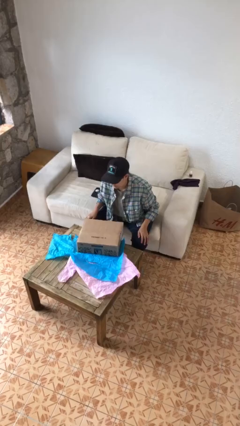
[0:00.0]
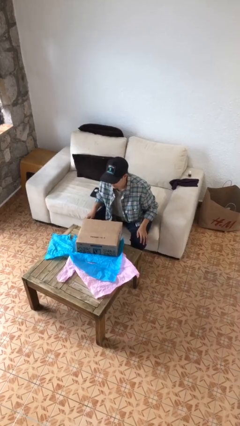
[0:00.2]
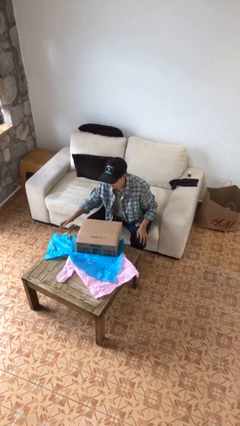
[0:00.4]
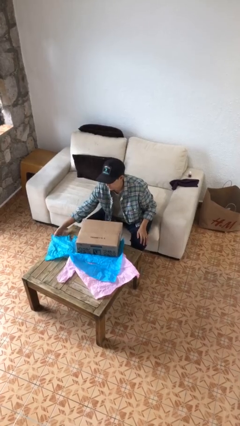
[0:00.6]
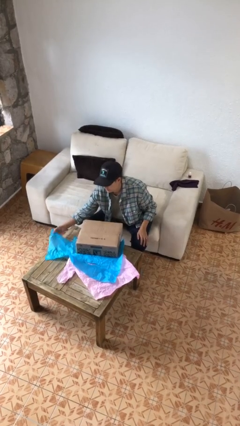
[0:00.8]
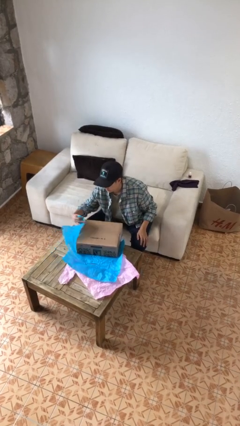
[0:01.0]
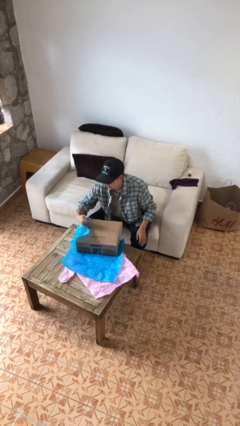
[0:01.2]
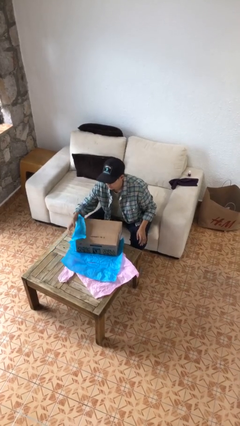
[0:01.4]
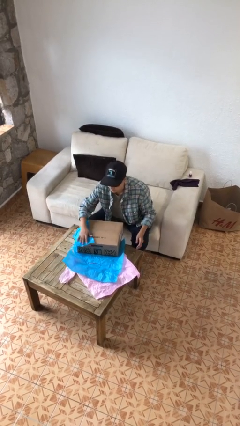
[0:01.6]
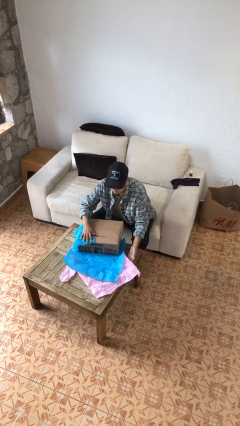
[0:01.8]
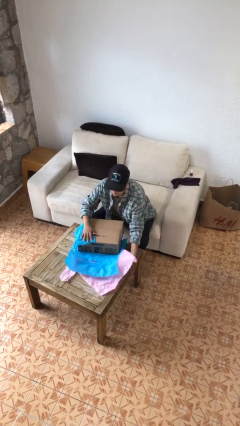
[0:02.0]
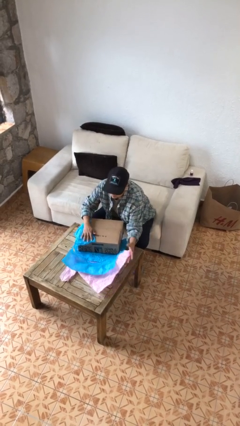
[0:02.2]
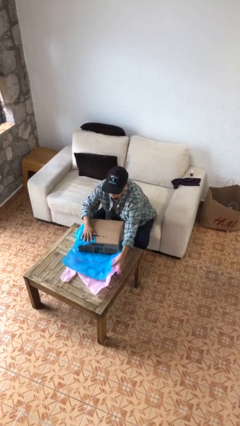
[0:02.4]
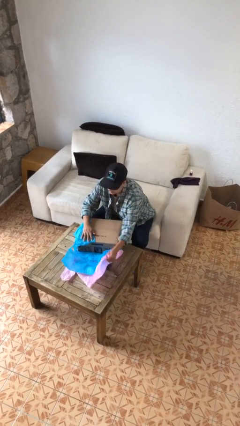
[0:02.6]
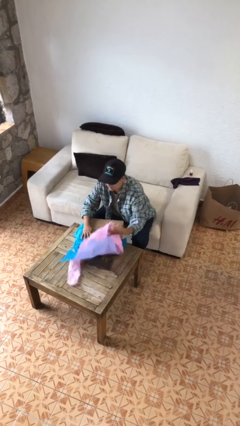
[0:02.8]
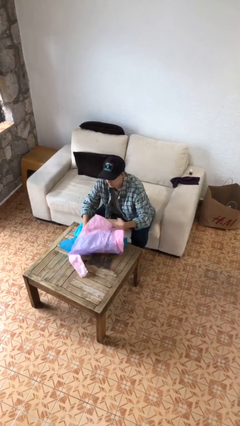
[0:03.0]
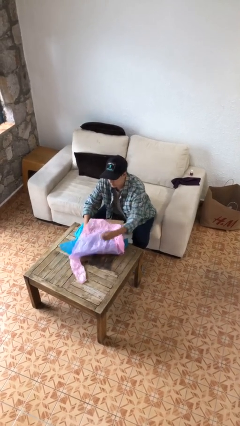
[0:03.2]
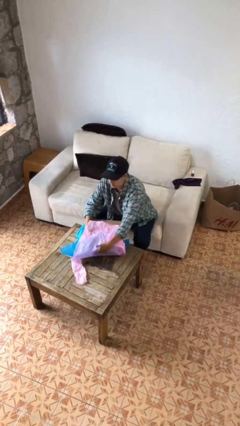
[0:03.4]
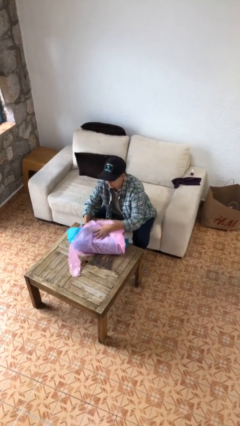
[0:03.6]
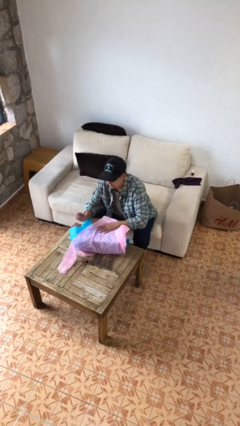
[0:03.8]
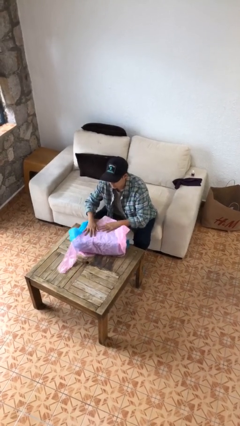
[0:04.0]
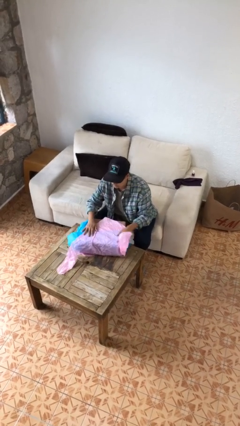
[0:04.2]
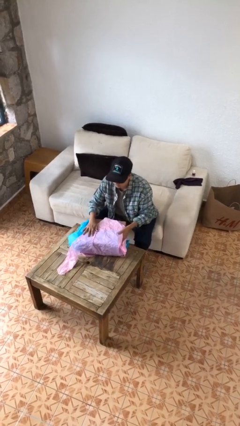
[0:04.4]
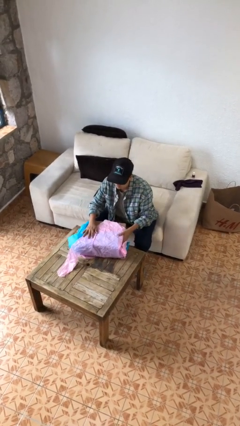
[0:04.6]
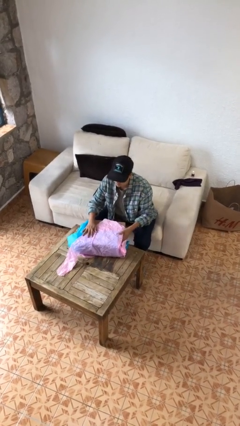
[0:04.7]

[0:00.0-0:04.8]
person wraps box

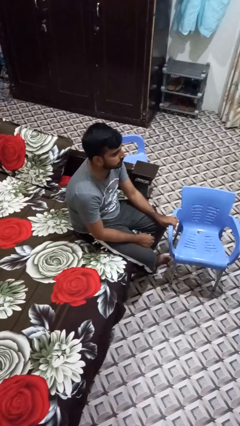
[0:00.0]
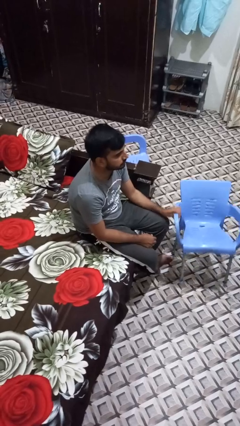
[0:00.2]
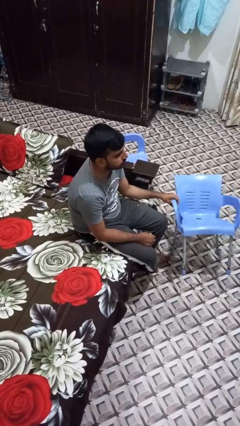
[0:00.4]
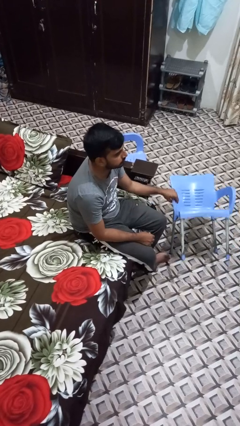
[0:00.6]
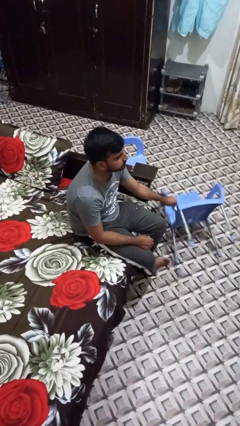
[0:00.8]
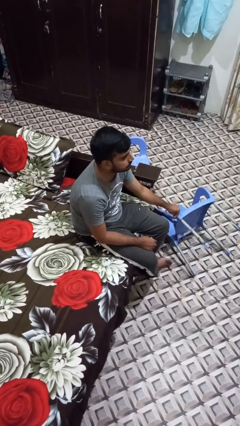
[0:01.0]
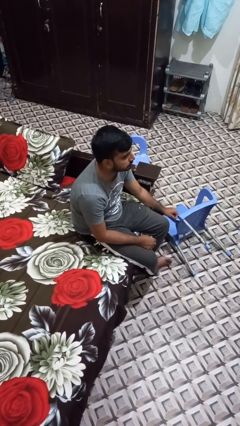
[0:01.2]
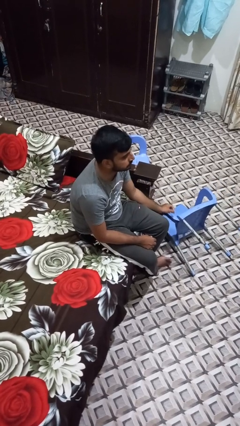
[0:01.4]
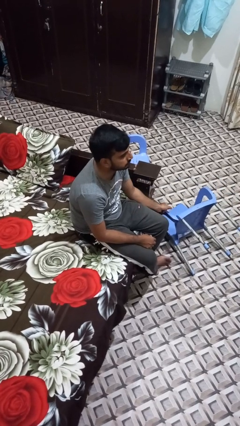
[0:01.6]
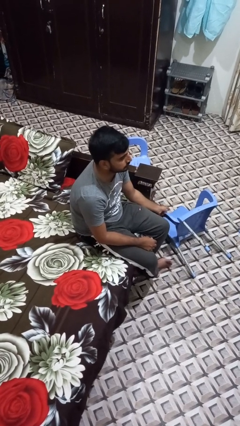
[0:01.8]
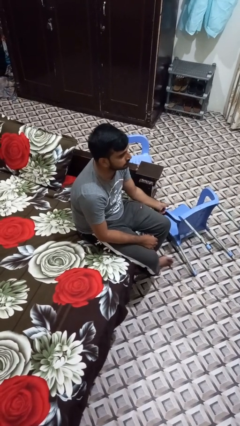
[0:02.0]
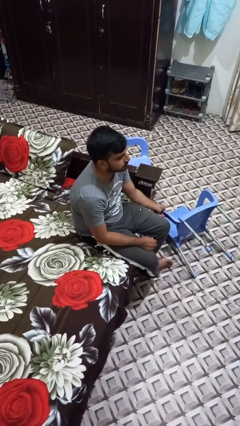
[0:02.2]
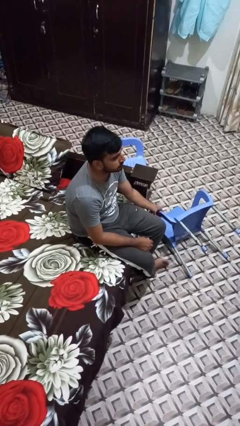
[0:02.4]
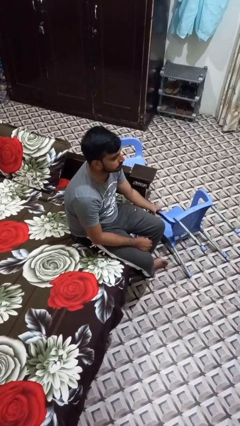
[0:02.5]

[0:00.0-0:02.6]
person knocks over furniture

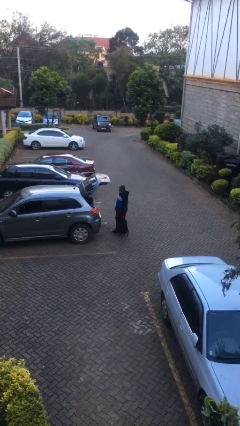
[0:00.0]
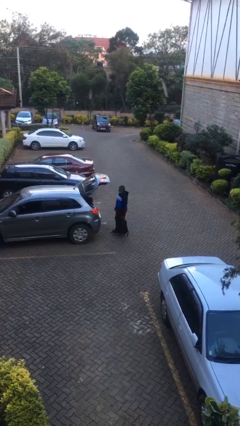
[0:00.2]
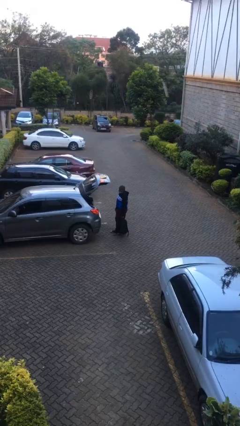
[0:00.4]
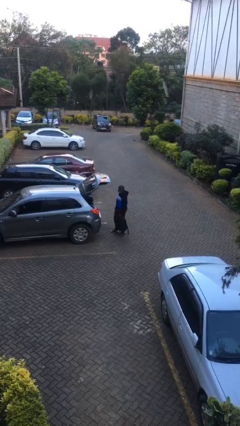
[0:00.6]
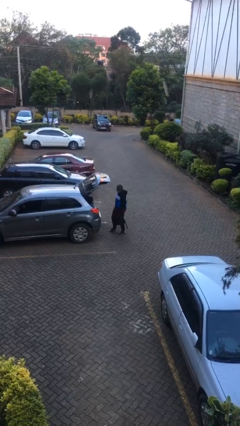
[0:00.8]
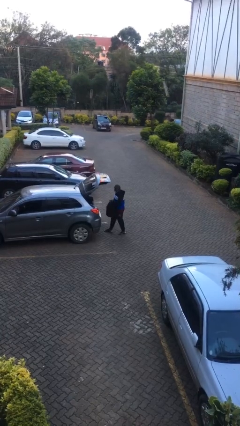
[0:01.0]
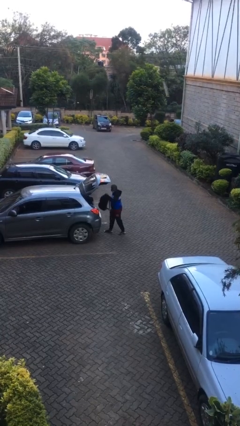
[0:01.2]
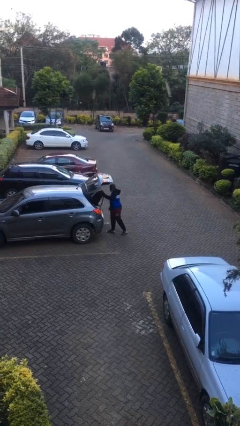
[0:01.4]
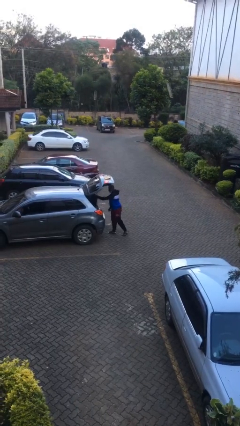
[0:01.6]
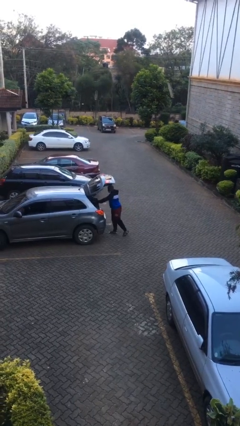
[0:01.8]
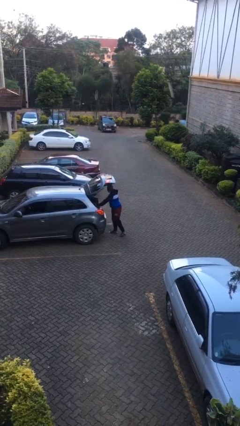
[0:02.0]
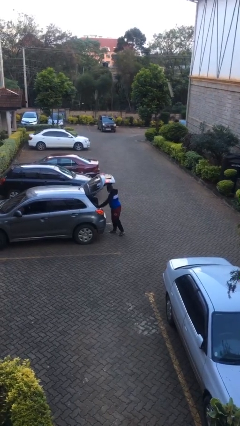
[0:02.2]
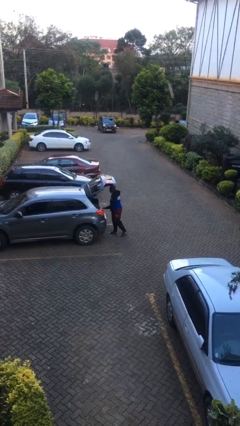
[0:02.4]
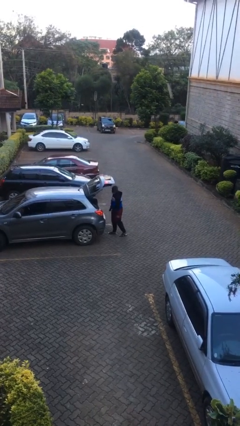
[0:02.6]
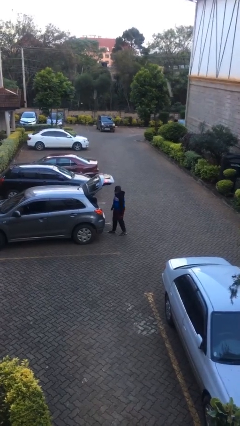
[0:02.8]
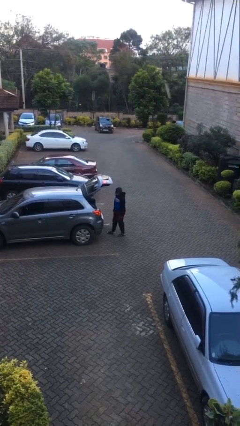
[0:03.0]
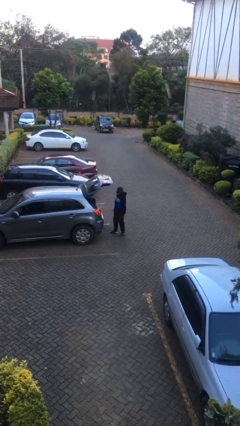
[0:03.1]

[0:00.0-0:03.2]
person loads car

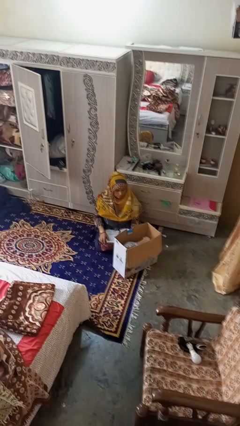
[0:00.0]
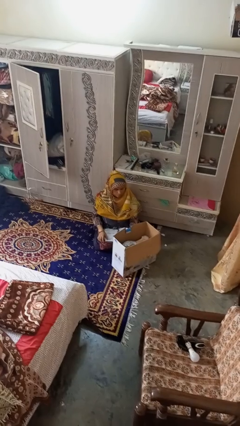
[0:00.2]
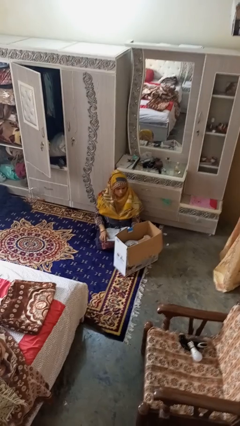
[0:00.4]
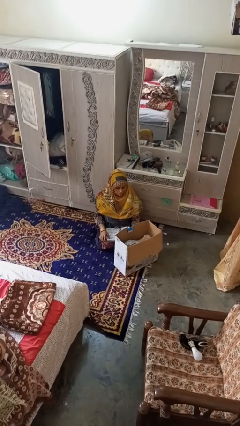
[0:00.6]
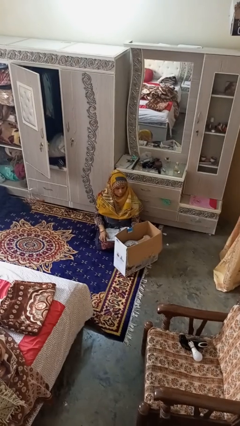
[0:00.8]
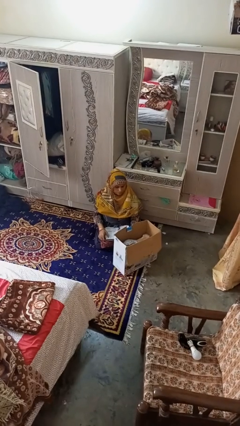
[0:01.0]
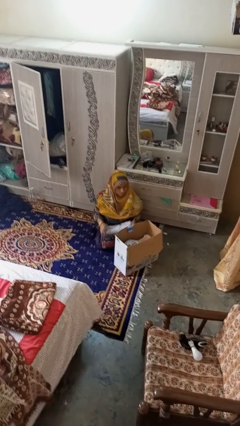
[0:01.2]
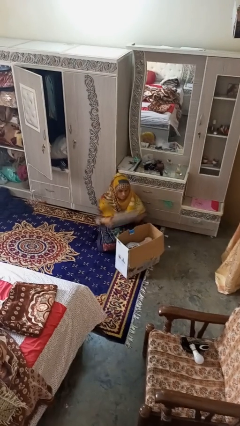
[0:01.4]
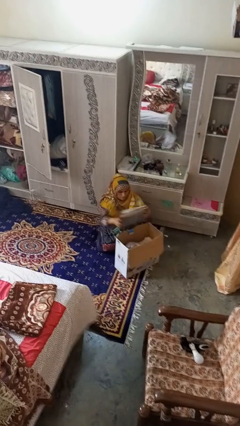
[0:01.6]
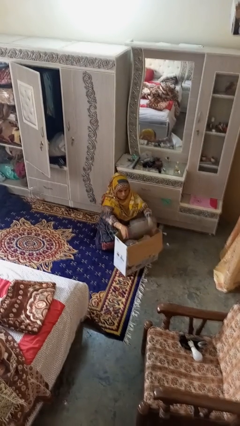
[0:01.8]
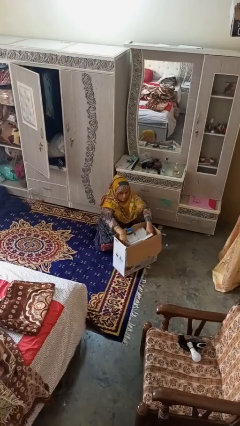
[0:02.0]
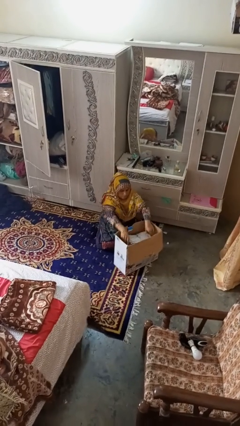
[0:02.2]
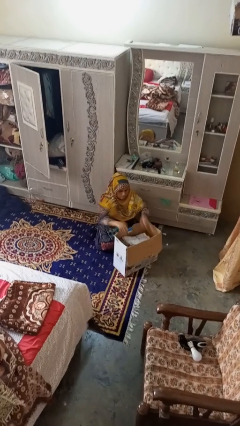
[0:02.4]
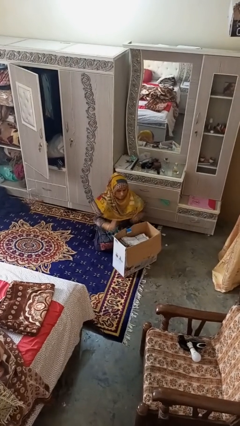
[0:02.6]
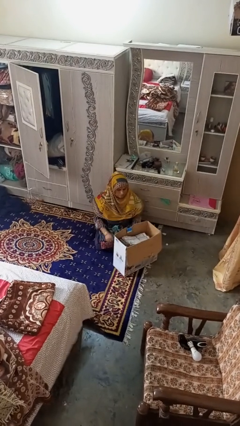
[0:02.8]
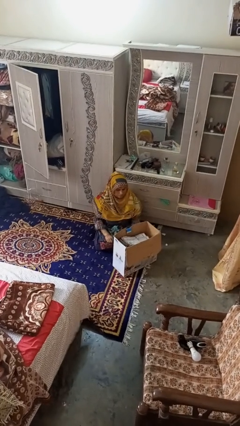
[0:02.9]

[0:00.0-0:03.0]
person puts object into box

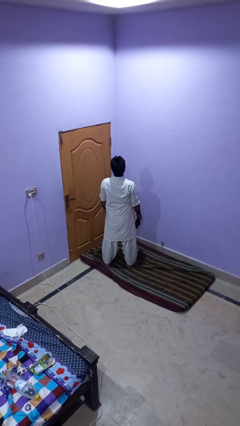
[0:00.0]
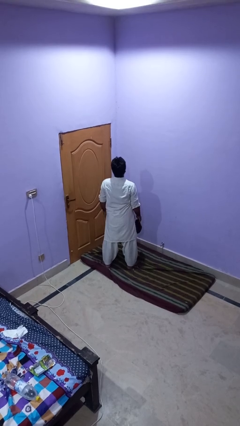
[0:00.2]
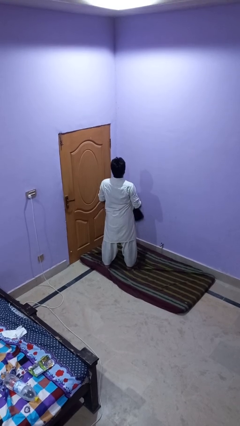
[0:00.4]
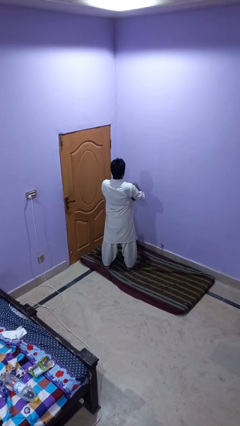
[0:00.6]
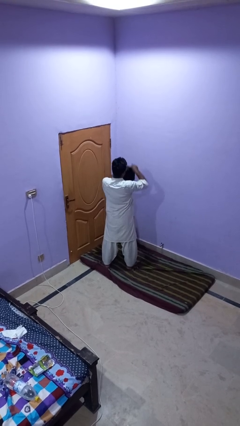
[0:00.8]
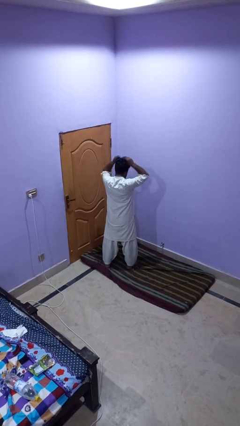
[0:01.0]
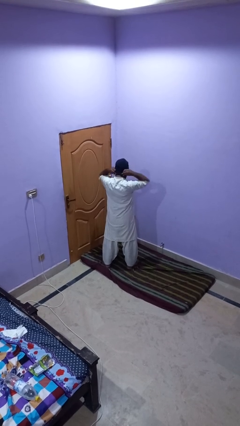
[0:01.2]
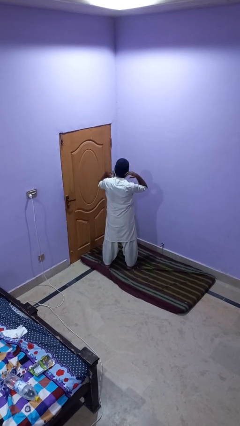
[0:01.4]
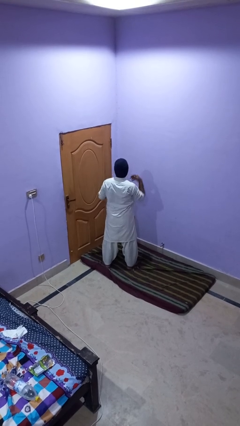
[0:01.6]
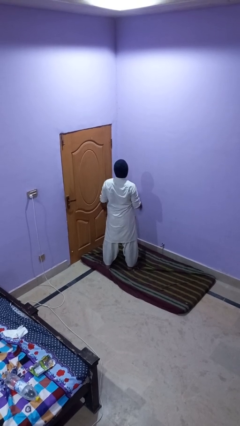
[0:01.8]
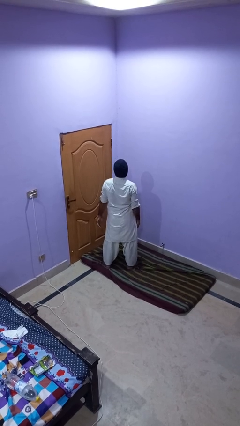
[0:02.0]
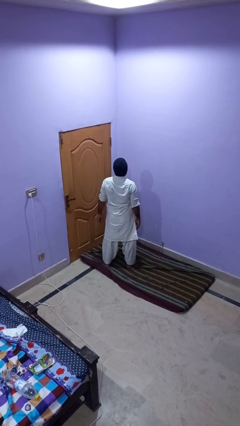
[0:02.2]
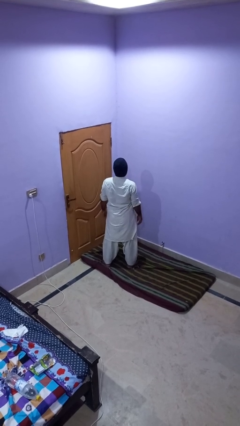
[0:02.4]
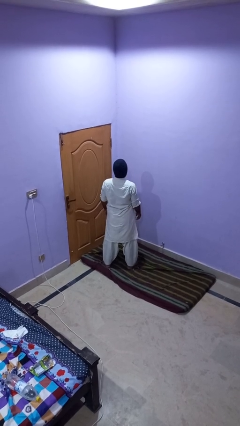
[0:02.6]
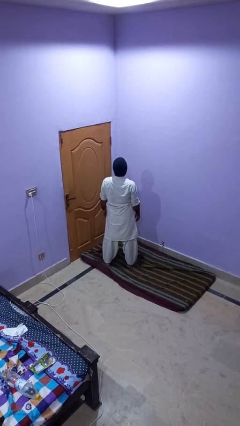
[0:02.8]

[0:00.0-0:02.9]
person puts on hat

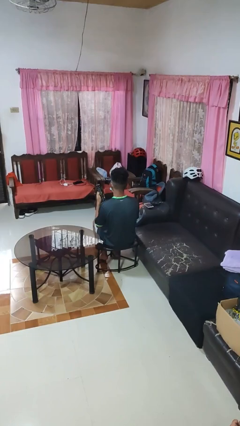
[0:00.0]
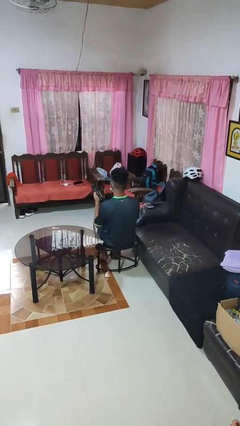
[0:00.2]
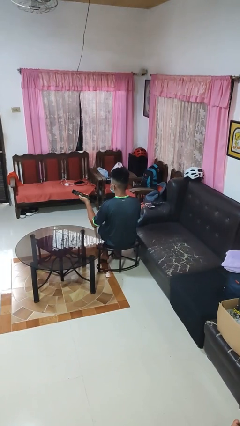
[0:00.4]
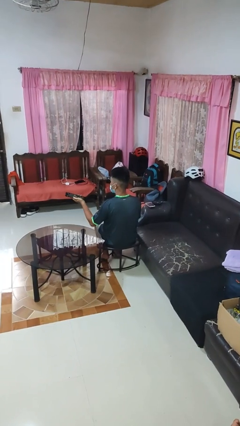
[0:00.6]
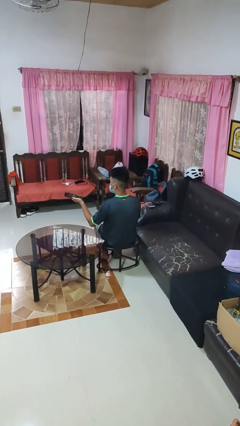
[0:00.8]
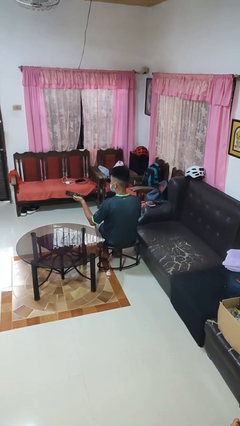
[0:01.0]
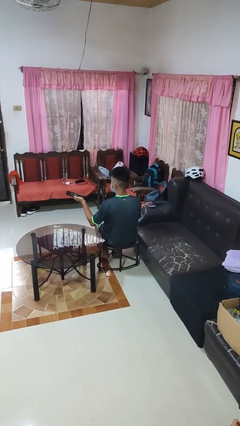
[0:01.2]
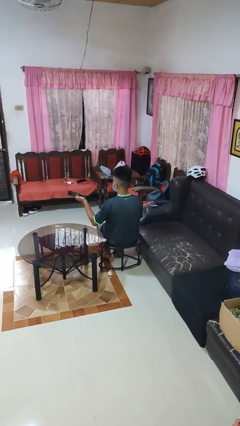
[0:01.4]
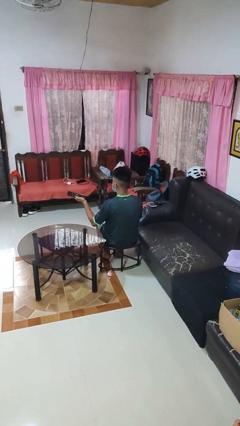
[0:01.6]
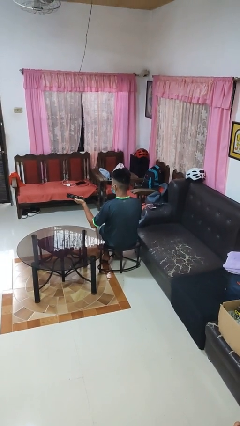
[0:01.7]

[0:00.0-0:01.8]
person uses television remote
